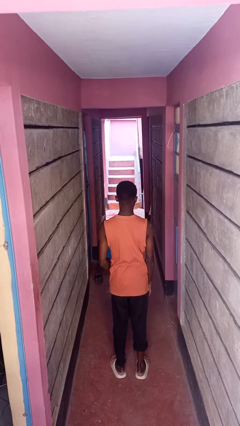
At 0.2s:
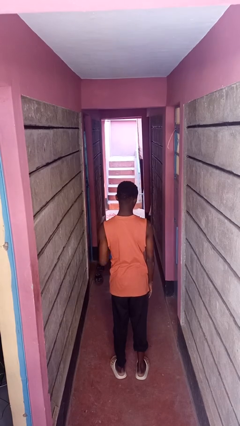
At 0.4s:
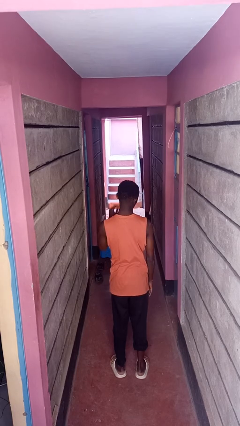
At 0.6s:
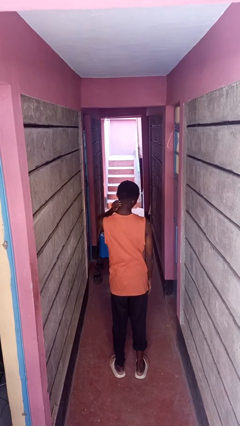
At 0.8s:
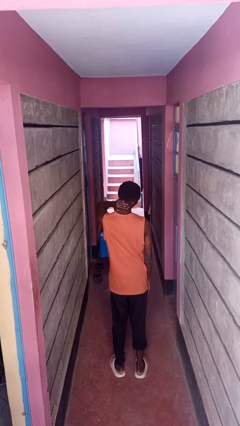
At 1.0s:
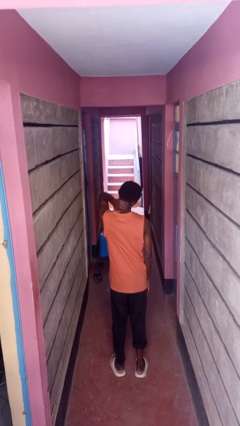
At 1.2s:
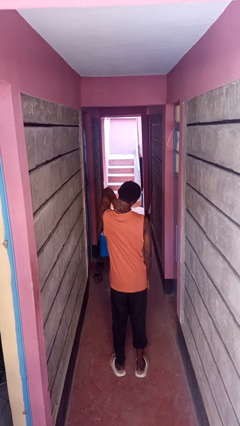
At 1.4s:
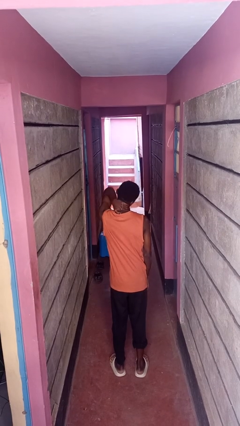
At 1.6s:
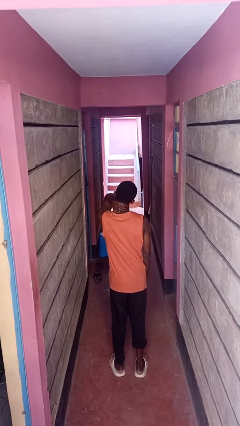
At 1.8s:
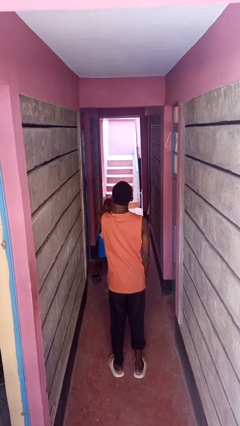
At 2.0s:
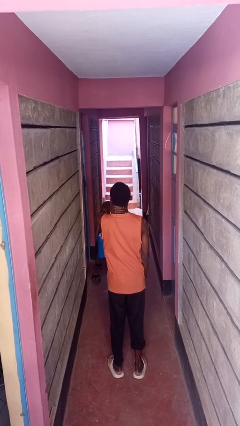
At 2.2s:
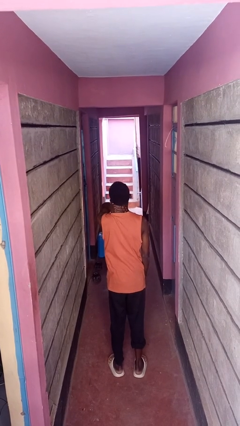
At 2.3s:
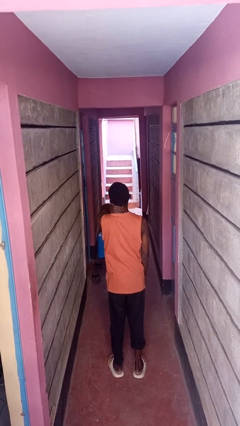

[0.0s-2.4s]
person rubs neck

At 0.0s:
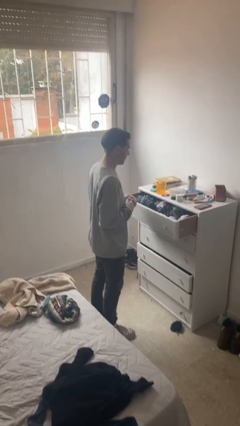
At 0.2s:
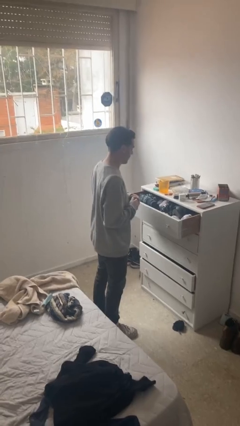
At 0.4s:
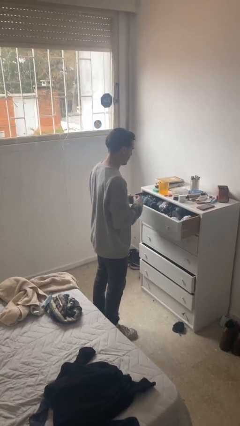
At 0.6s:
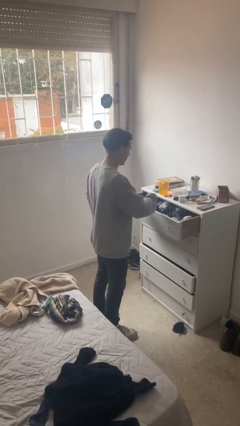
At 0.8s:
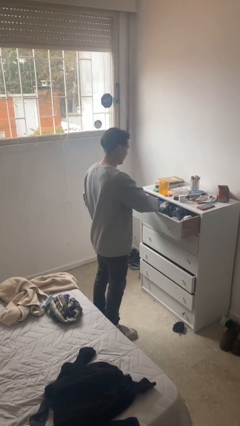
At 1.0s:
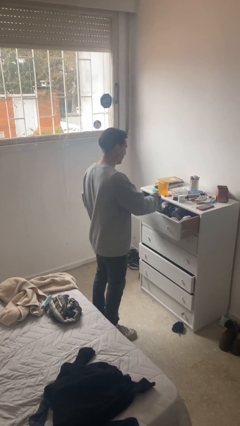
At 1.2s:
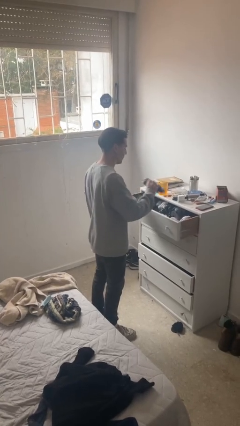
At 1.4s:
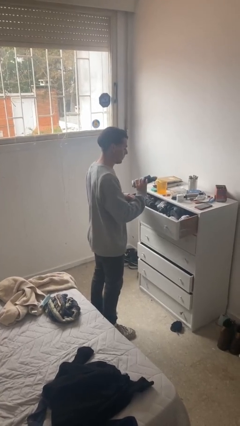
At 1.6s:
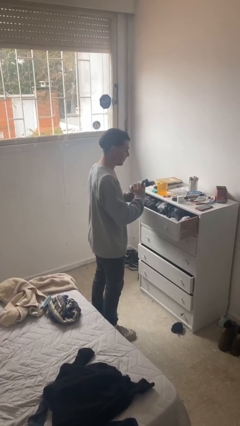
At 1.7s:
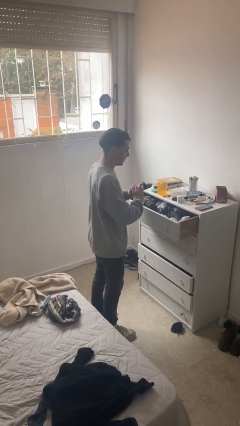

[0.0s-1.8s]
person takes clothes from dresser

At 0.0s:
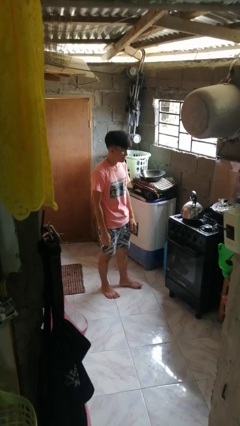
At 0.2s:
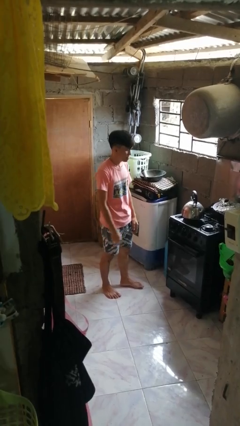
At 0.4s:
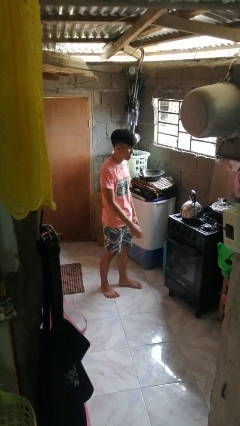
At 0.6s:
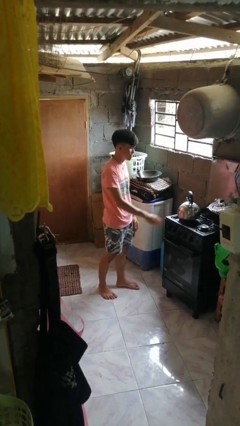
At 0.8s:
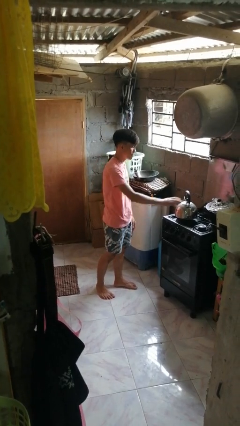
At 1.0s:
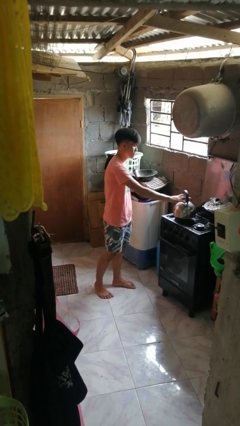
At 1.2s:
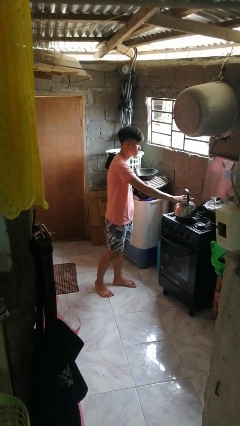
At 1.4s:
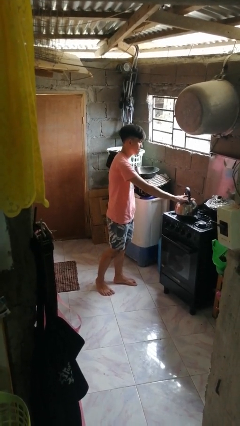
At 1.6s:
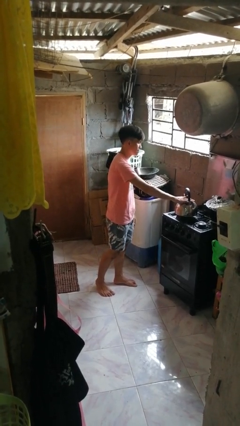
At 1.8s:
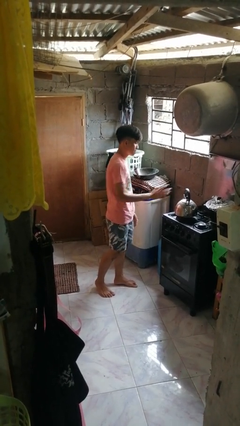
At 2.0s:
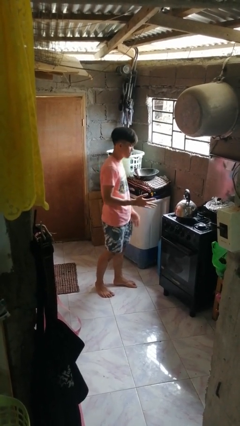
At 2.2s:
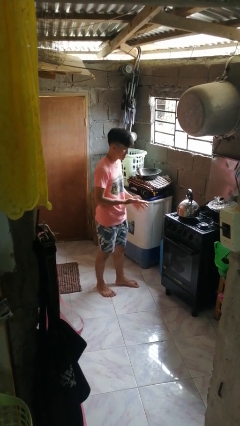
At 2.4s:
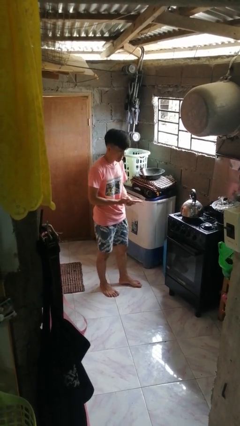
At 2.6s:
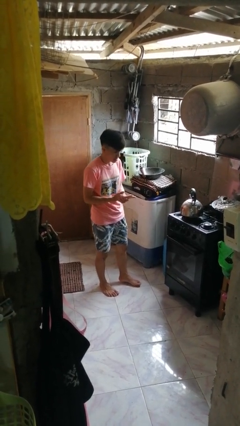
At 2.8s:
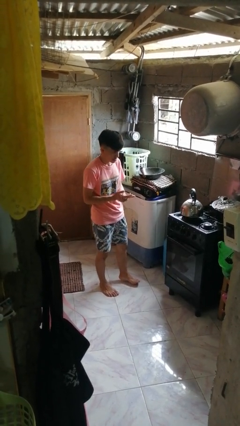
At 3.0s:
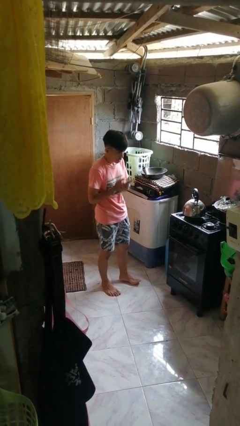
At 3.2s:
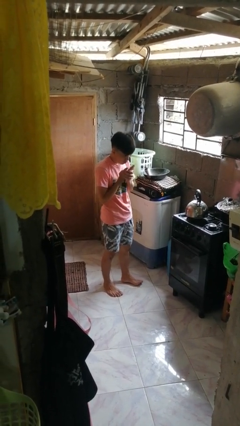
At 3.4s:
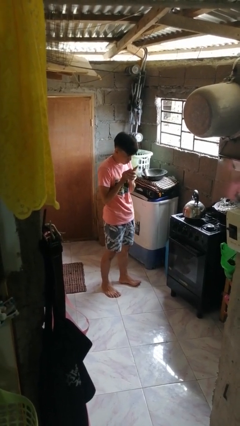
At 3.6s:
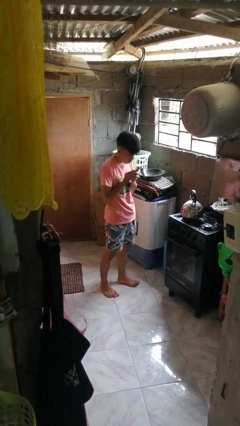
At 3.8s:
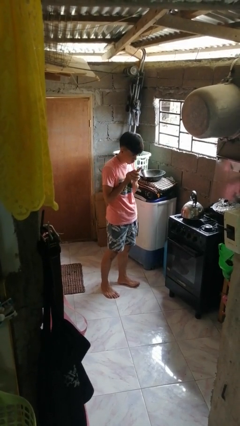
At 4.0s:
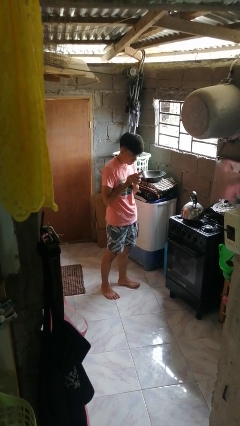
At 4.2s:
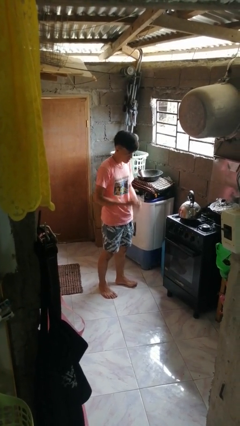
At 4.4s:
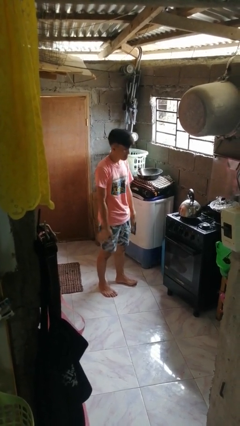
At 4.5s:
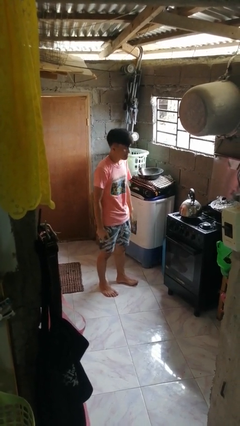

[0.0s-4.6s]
person burns hand

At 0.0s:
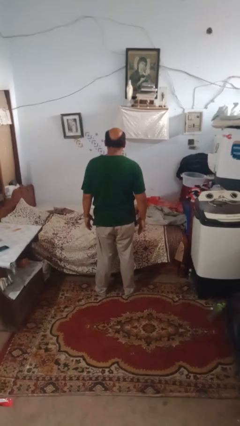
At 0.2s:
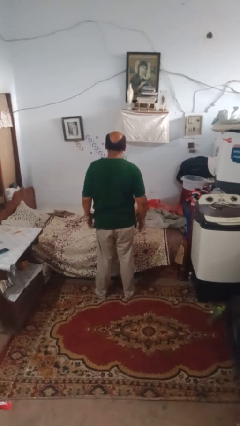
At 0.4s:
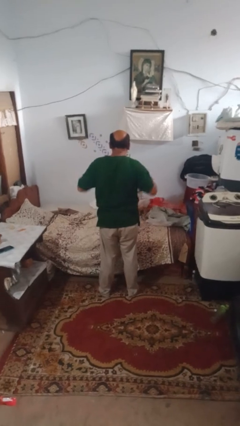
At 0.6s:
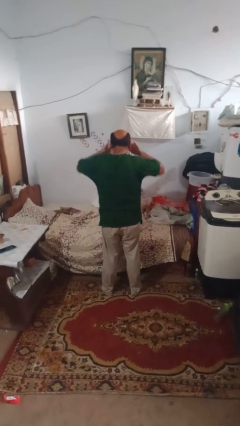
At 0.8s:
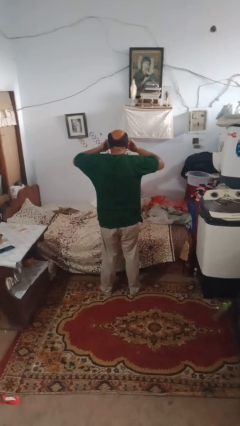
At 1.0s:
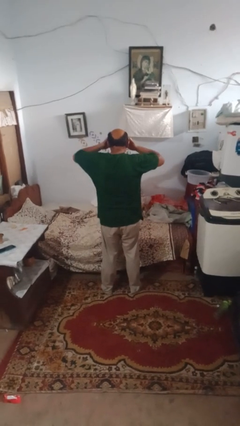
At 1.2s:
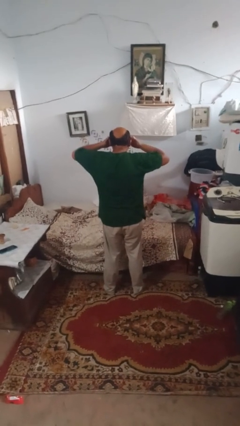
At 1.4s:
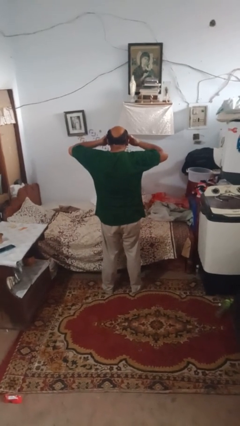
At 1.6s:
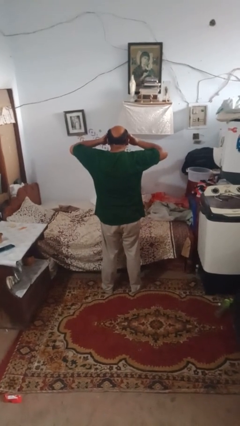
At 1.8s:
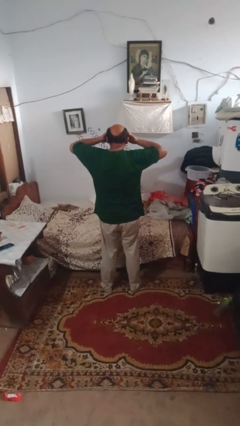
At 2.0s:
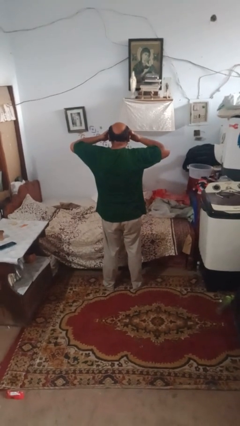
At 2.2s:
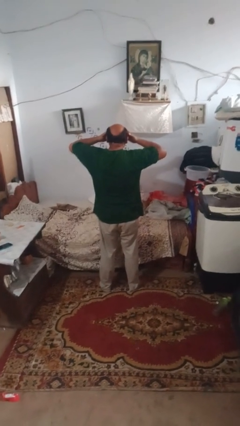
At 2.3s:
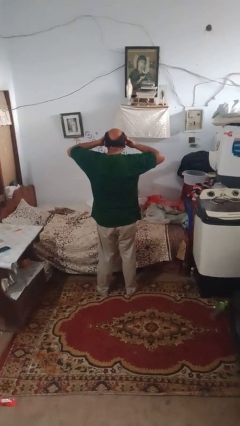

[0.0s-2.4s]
person rubs eyes

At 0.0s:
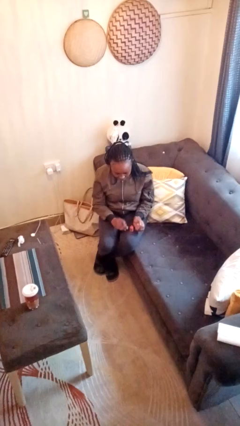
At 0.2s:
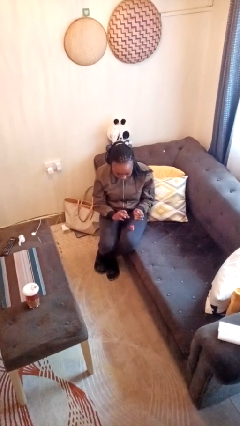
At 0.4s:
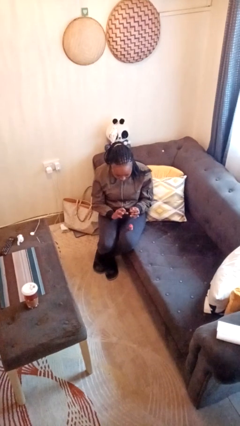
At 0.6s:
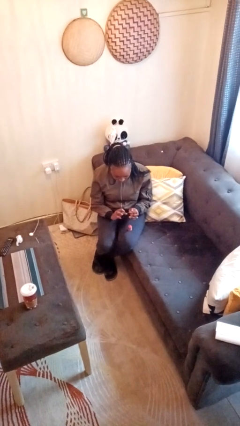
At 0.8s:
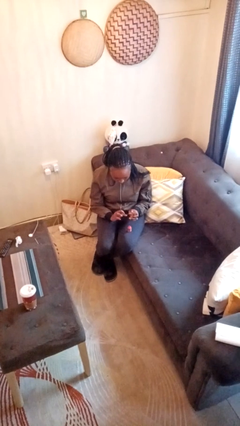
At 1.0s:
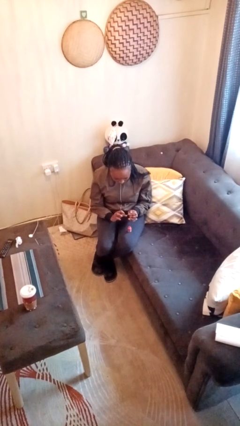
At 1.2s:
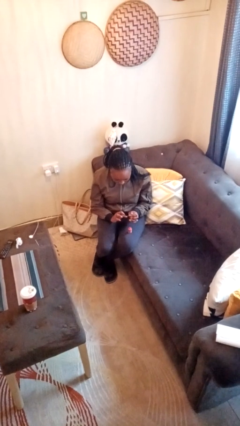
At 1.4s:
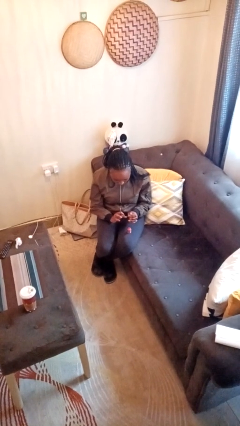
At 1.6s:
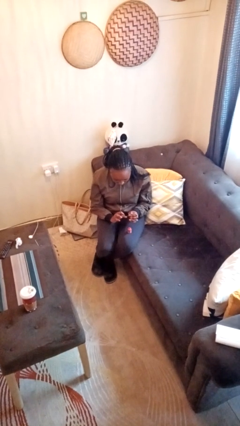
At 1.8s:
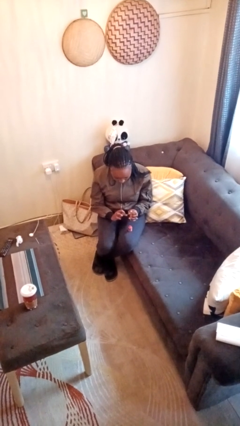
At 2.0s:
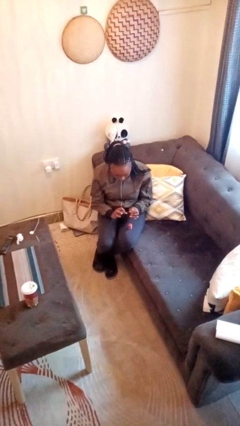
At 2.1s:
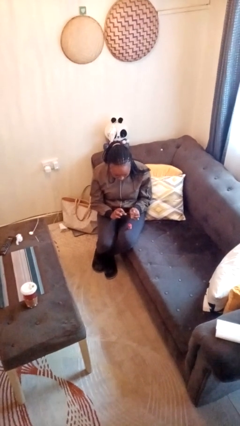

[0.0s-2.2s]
person paints fingernails

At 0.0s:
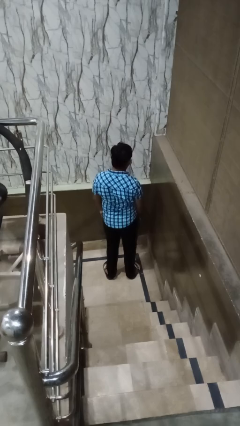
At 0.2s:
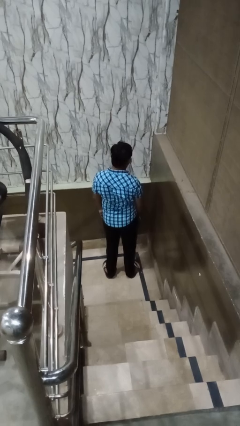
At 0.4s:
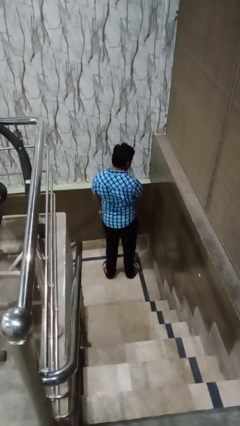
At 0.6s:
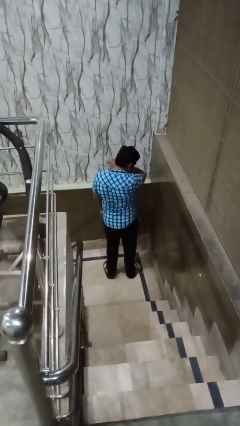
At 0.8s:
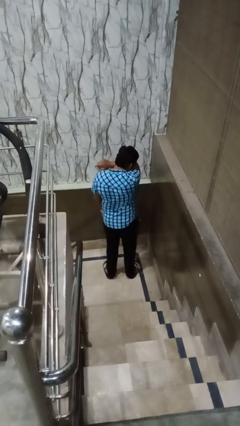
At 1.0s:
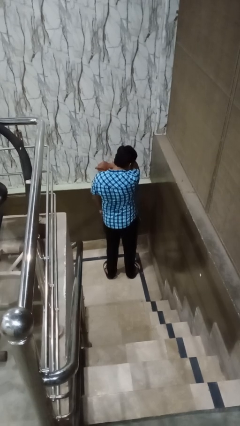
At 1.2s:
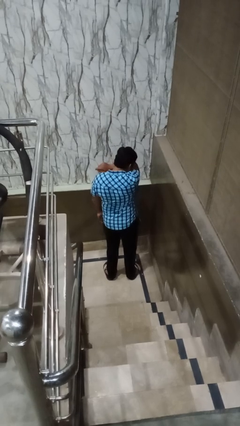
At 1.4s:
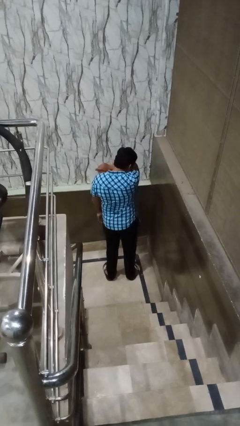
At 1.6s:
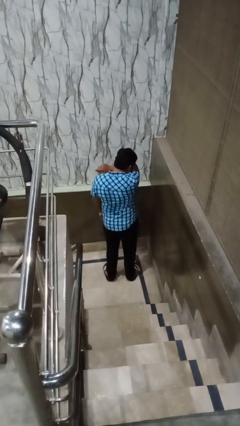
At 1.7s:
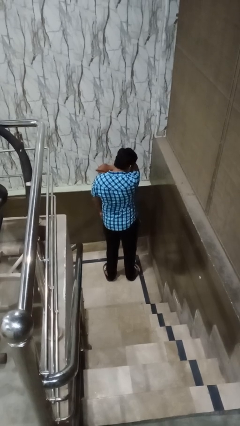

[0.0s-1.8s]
person sneezes into arm

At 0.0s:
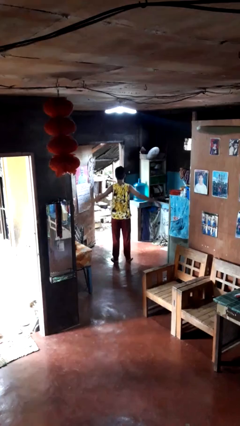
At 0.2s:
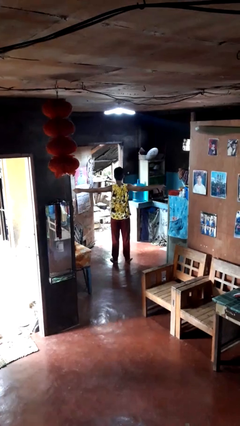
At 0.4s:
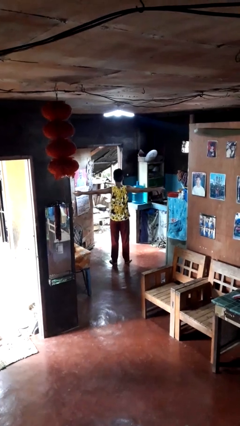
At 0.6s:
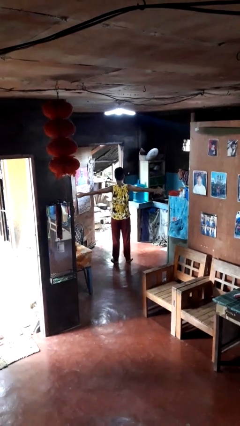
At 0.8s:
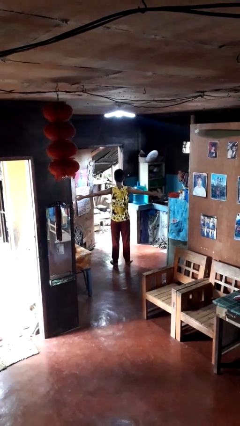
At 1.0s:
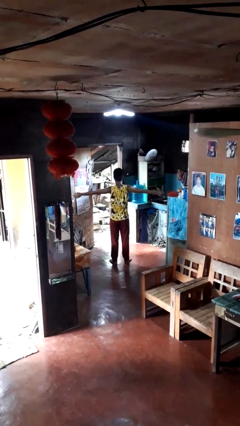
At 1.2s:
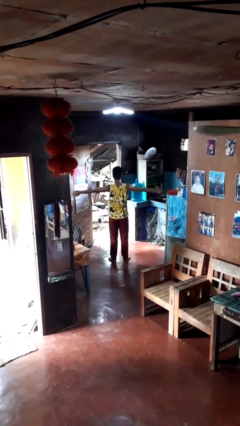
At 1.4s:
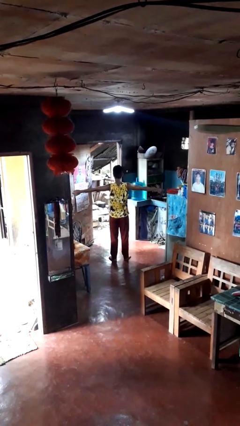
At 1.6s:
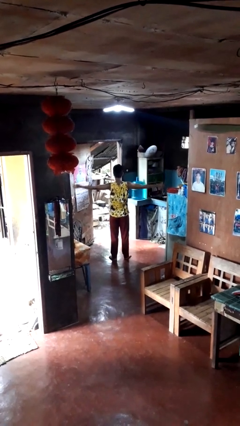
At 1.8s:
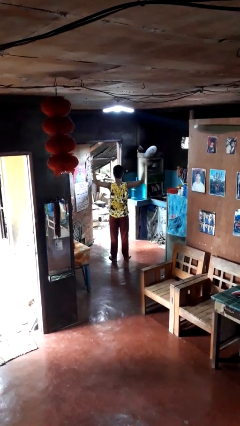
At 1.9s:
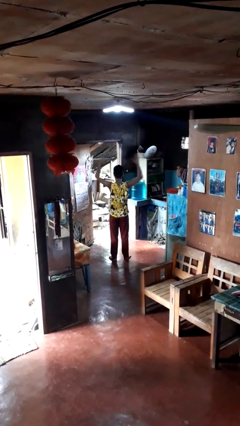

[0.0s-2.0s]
person stretches arms to side
